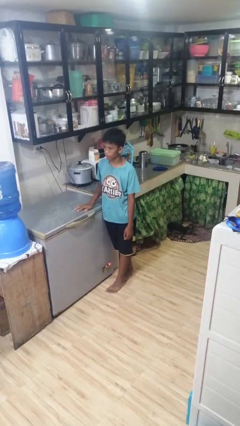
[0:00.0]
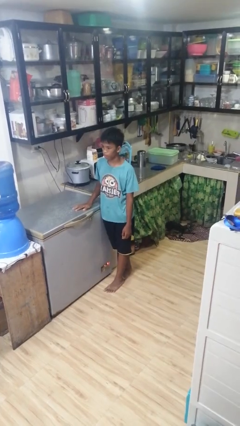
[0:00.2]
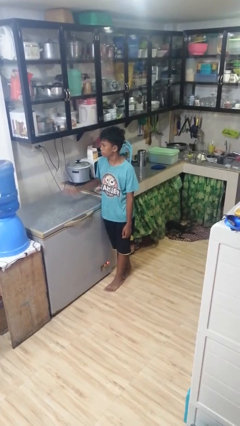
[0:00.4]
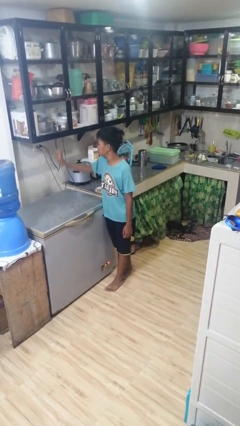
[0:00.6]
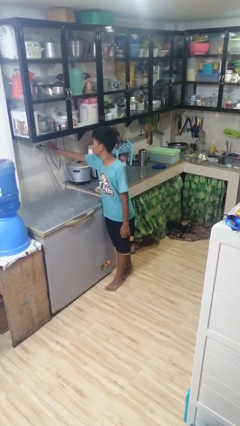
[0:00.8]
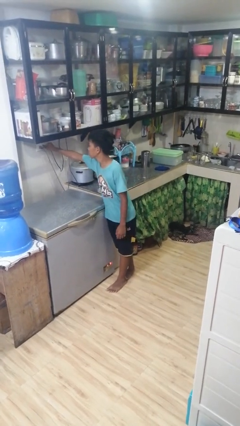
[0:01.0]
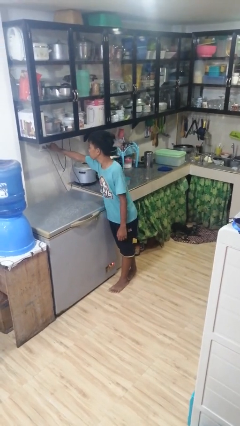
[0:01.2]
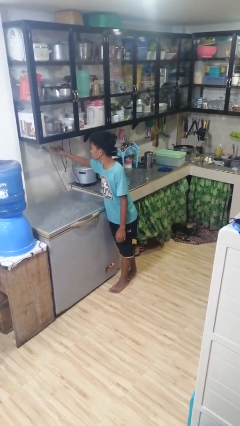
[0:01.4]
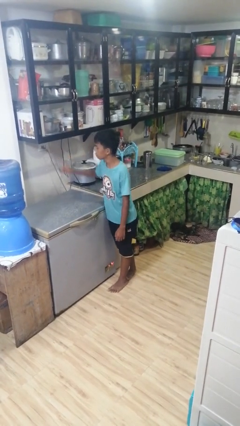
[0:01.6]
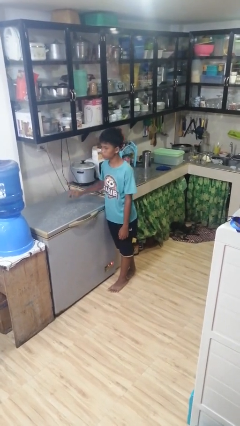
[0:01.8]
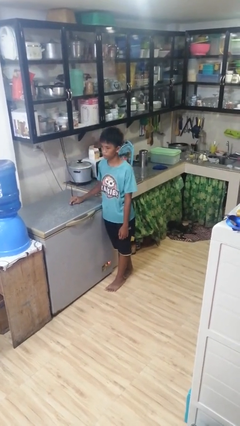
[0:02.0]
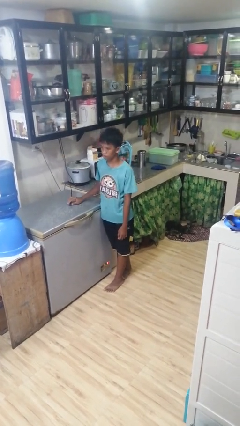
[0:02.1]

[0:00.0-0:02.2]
person unplugs from electrical socket

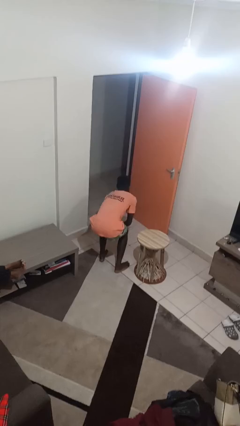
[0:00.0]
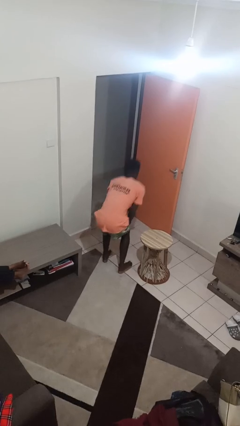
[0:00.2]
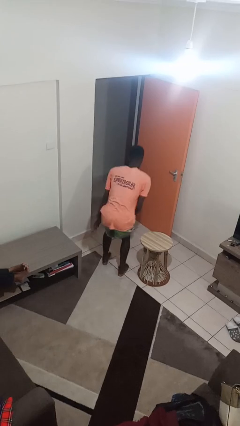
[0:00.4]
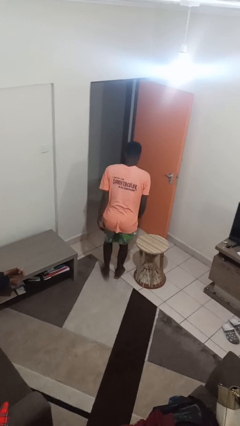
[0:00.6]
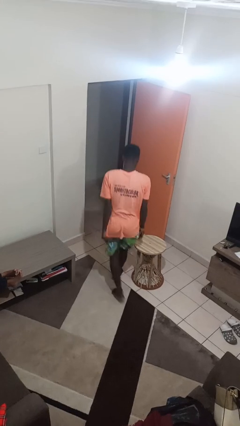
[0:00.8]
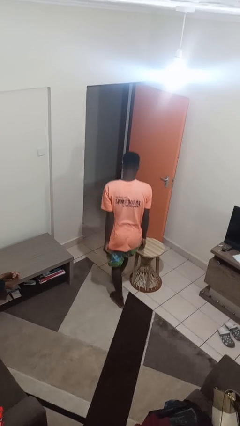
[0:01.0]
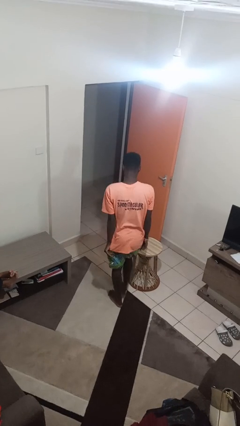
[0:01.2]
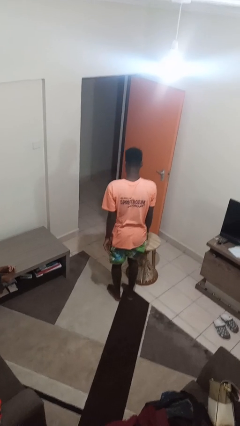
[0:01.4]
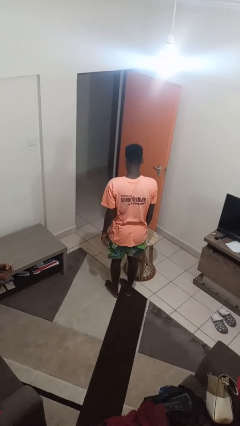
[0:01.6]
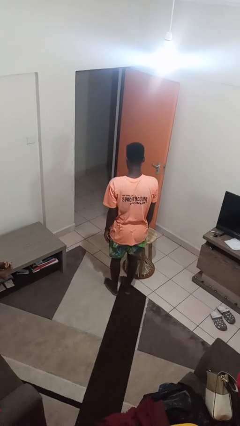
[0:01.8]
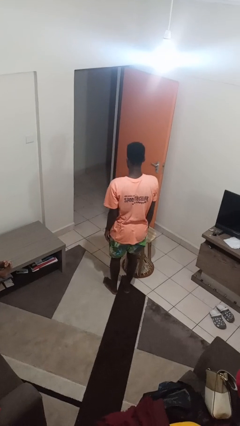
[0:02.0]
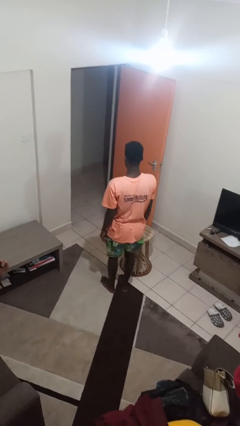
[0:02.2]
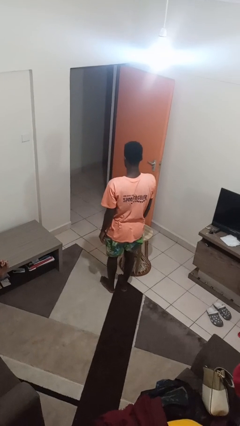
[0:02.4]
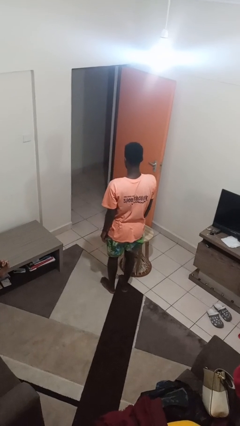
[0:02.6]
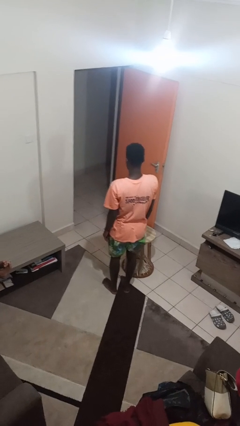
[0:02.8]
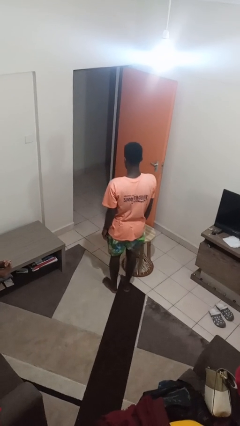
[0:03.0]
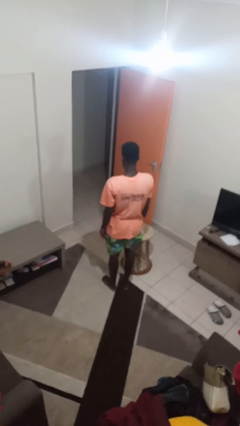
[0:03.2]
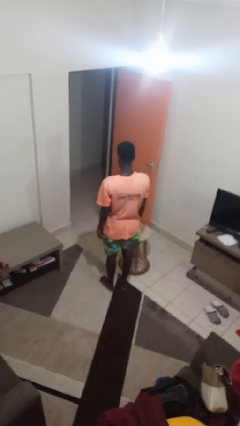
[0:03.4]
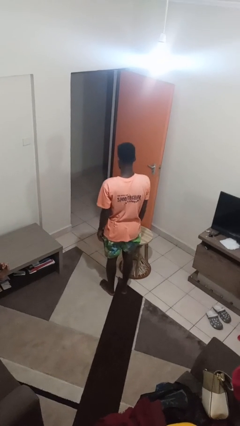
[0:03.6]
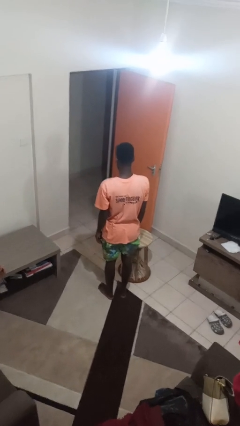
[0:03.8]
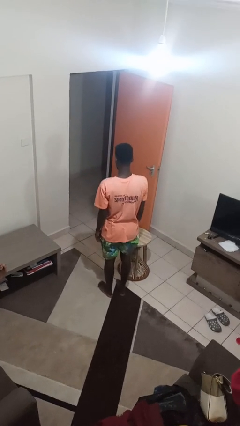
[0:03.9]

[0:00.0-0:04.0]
person stands up from floor

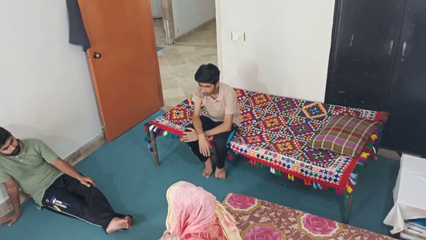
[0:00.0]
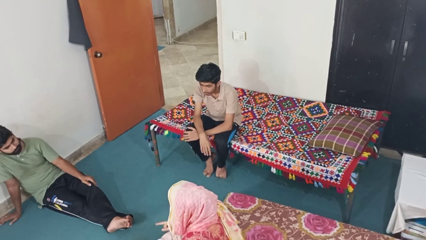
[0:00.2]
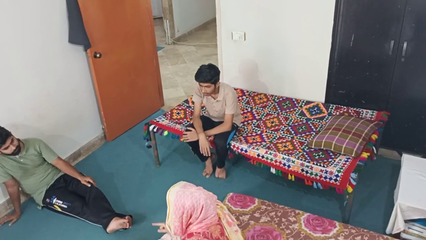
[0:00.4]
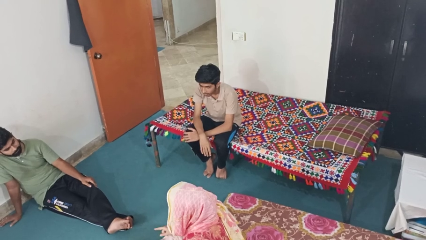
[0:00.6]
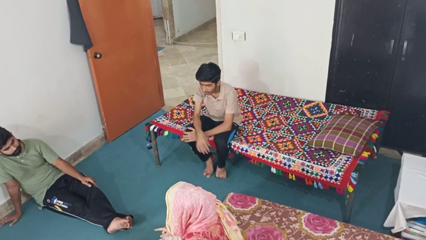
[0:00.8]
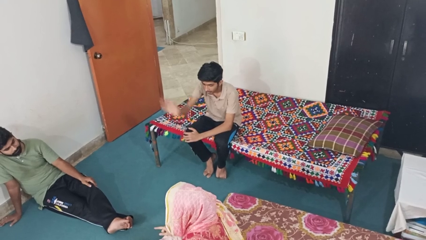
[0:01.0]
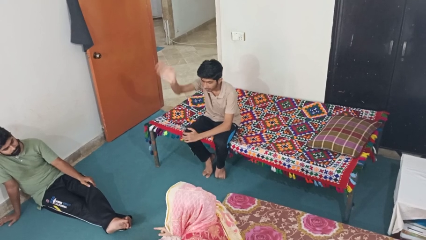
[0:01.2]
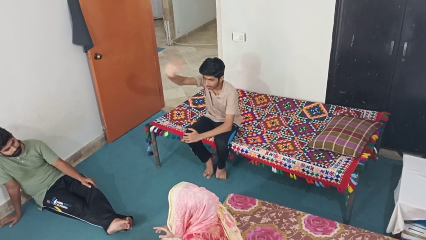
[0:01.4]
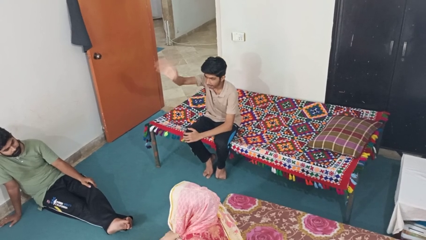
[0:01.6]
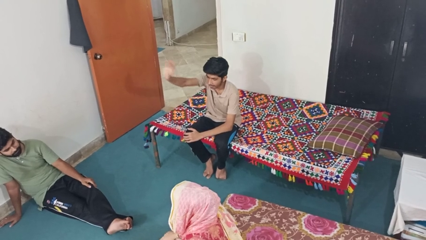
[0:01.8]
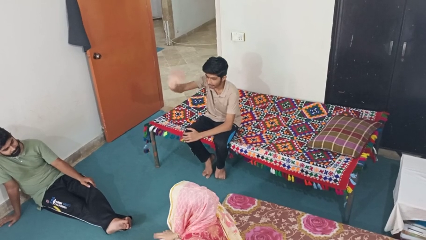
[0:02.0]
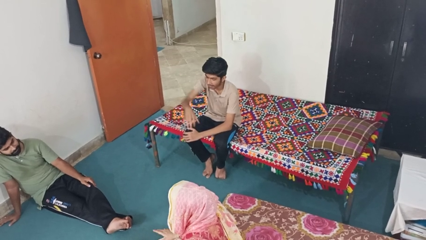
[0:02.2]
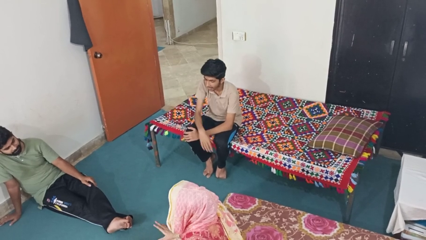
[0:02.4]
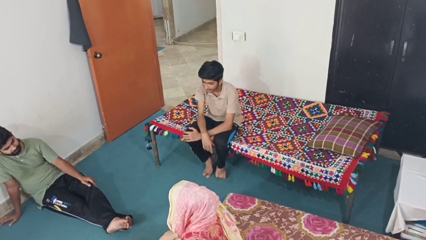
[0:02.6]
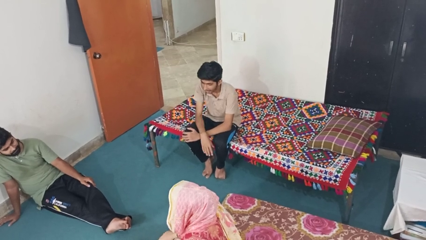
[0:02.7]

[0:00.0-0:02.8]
person waves at person

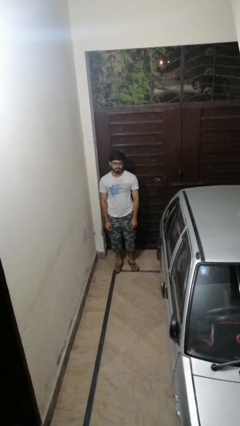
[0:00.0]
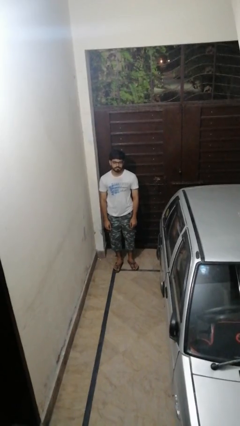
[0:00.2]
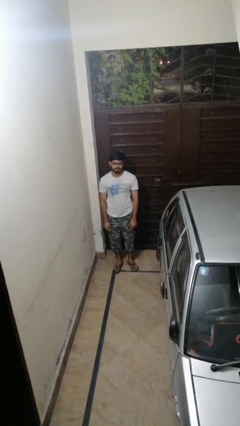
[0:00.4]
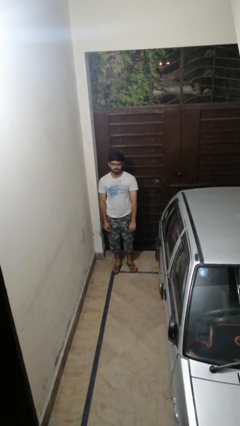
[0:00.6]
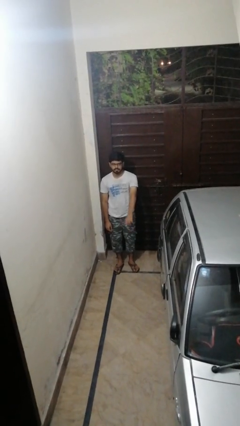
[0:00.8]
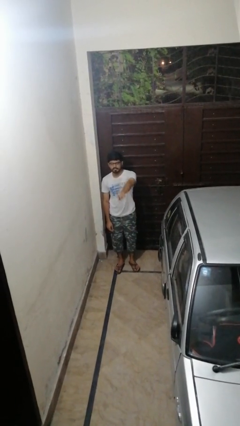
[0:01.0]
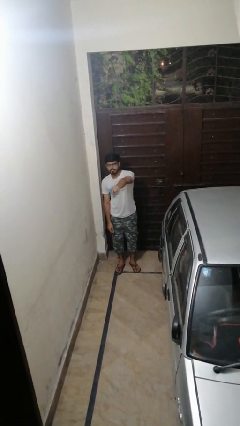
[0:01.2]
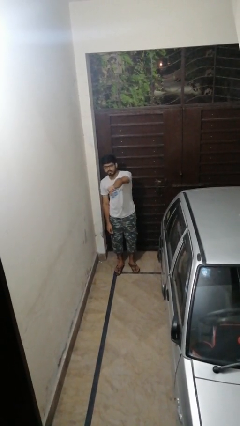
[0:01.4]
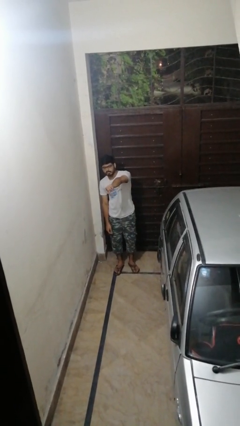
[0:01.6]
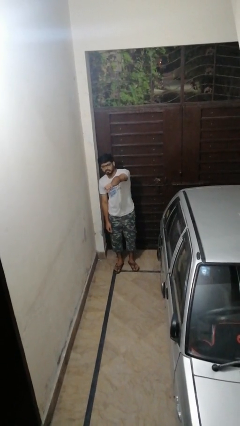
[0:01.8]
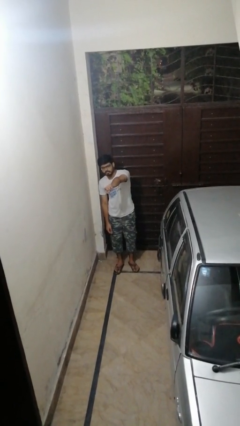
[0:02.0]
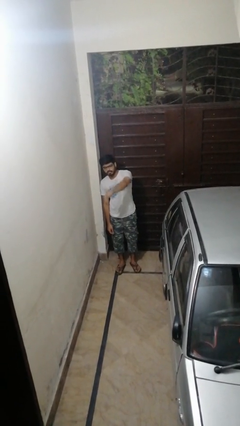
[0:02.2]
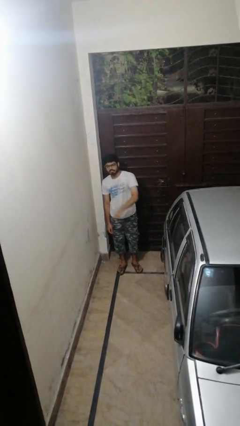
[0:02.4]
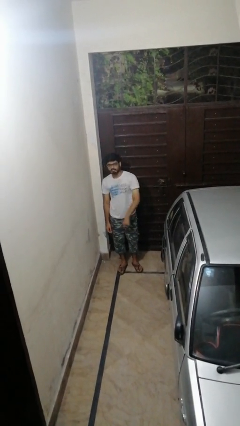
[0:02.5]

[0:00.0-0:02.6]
person points at person

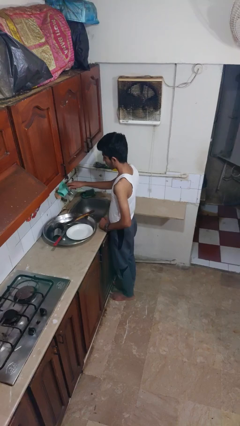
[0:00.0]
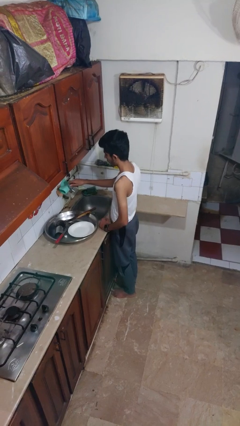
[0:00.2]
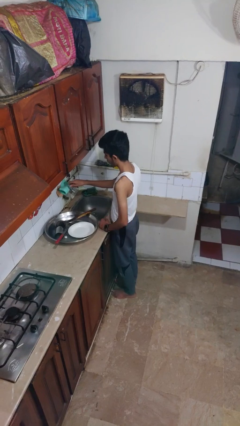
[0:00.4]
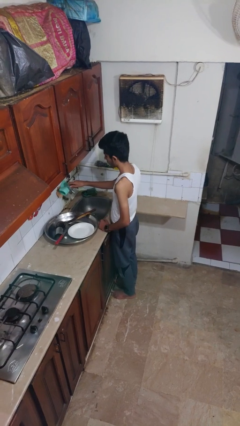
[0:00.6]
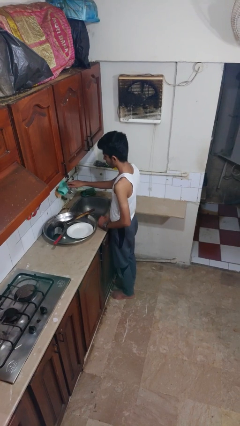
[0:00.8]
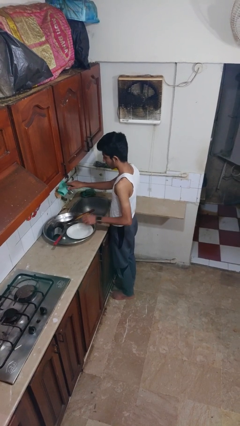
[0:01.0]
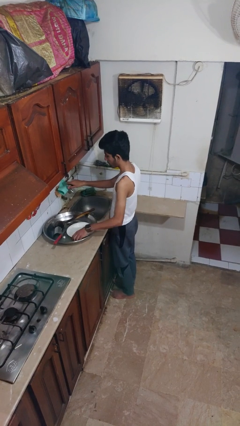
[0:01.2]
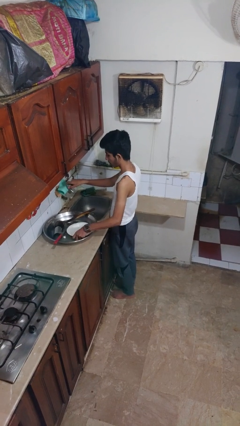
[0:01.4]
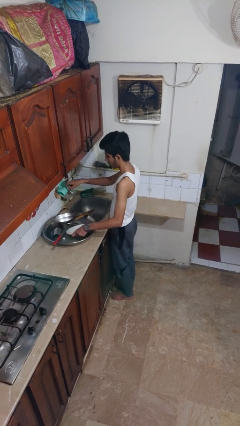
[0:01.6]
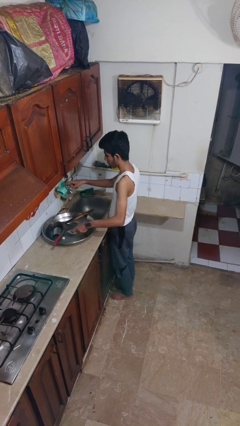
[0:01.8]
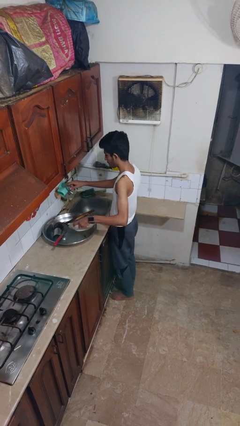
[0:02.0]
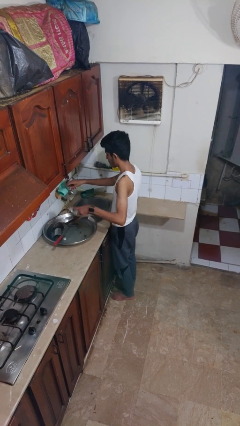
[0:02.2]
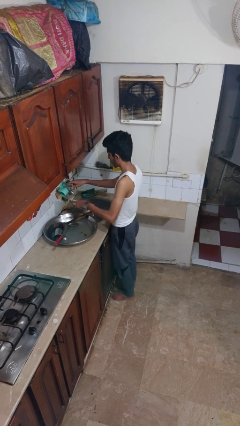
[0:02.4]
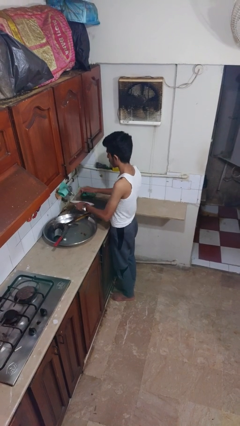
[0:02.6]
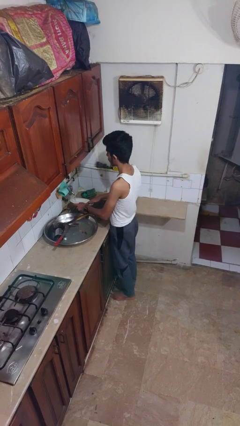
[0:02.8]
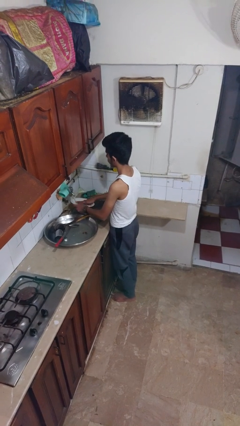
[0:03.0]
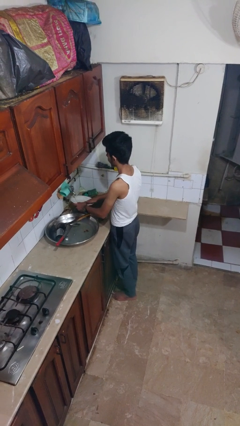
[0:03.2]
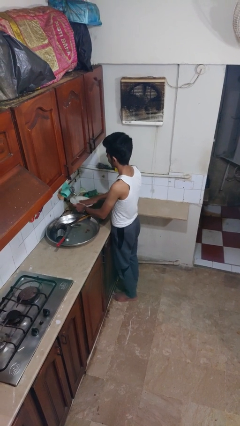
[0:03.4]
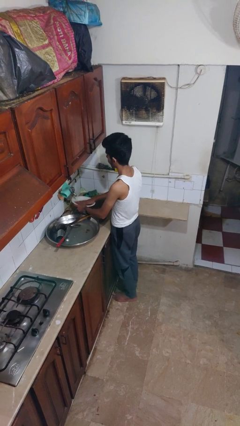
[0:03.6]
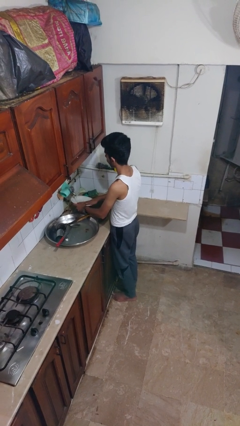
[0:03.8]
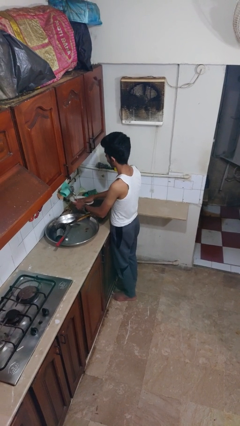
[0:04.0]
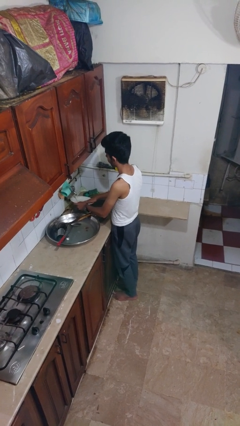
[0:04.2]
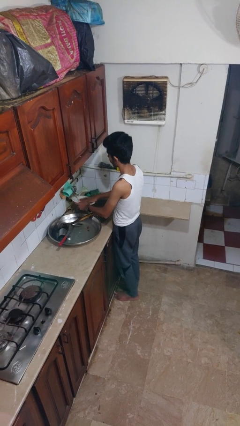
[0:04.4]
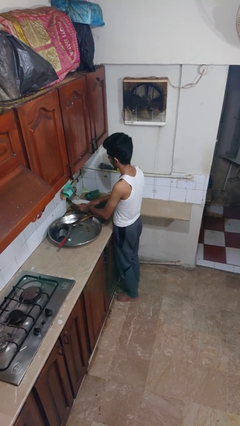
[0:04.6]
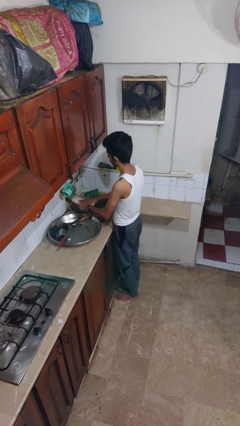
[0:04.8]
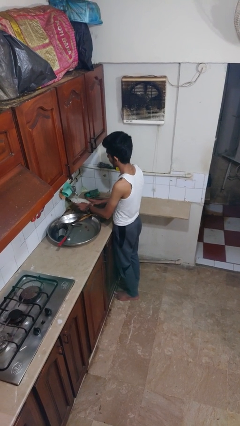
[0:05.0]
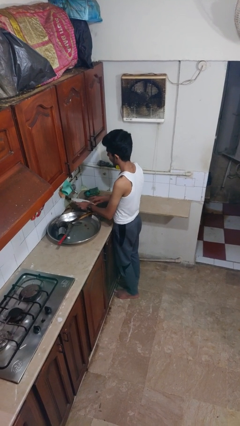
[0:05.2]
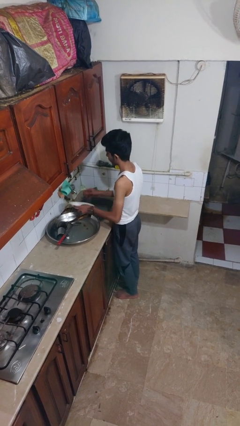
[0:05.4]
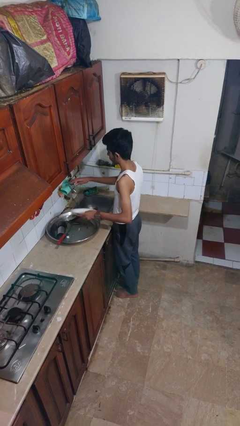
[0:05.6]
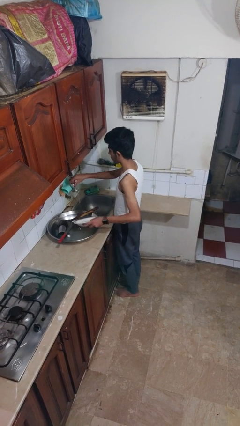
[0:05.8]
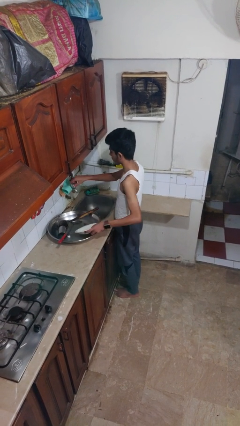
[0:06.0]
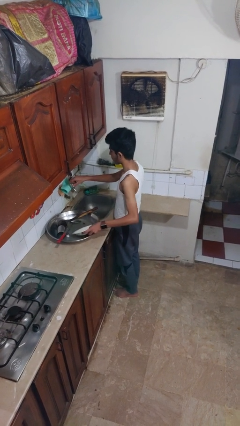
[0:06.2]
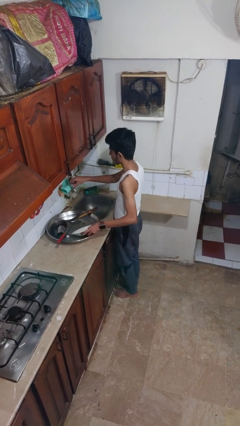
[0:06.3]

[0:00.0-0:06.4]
person washes dish
